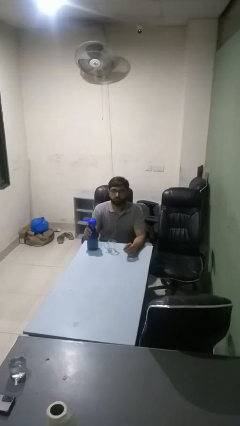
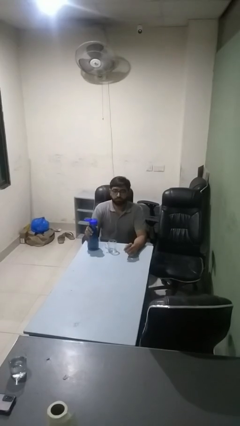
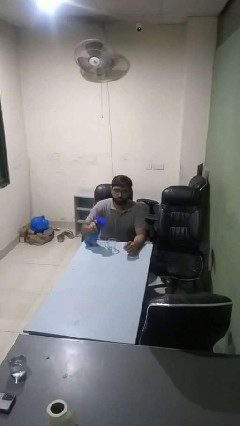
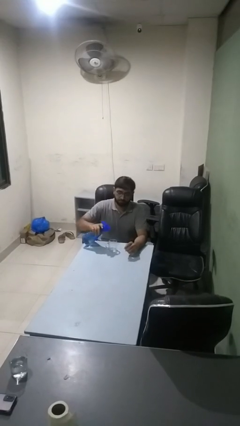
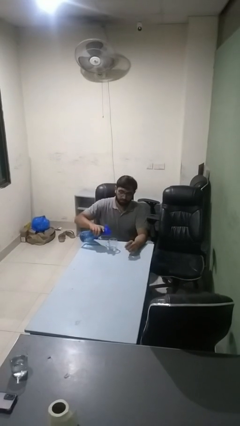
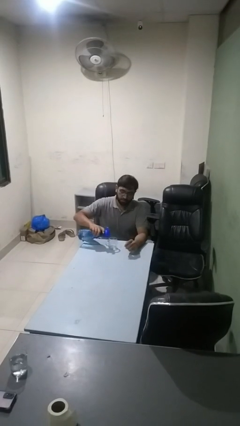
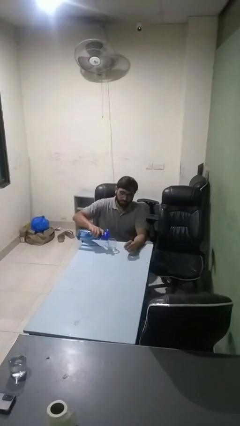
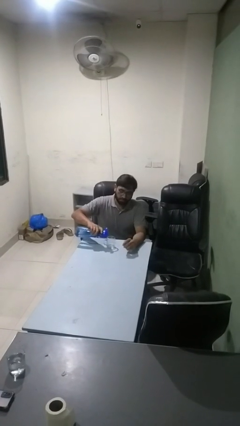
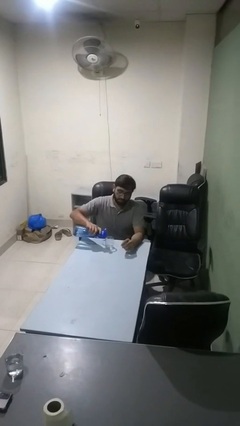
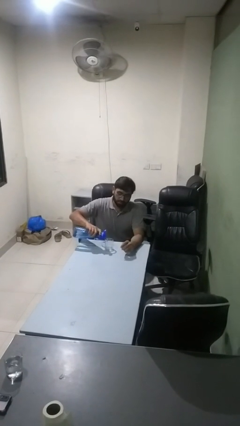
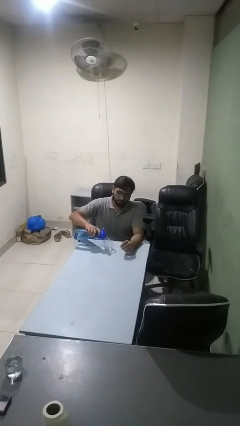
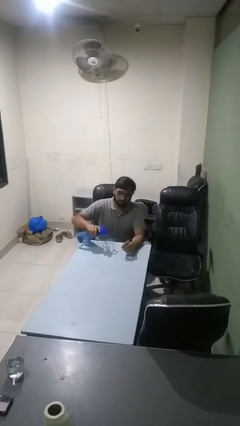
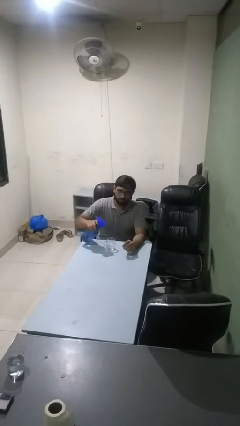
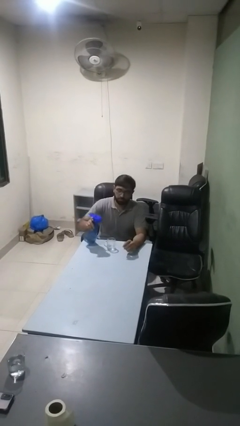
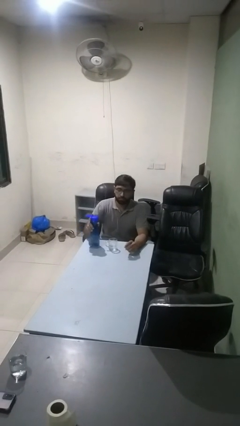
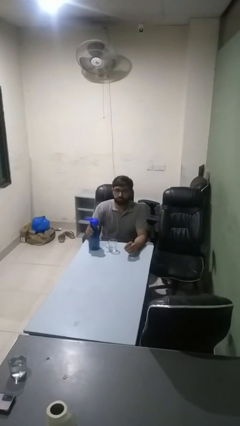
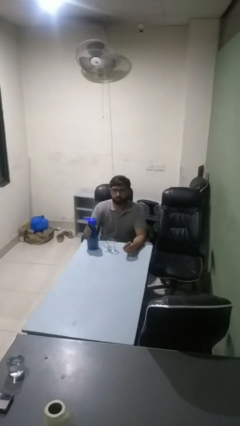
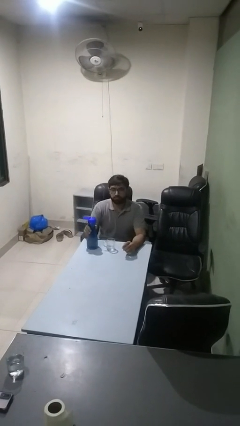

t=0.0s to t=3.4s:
person pours liquid into cup

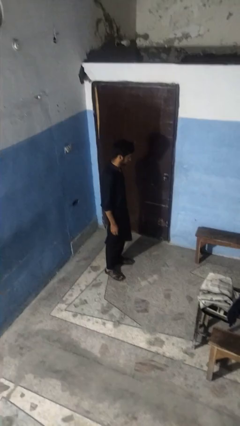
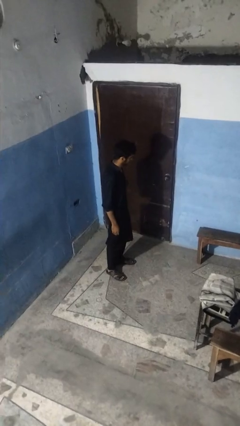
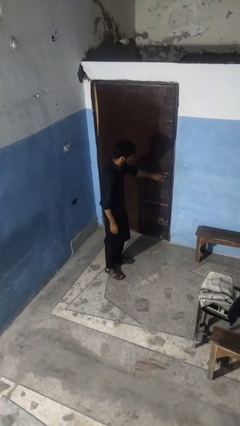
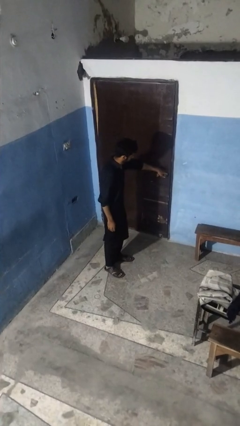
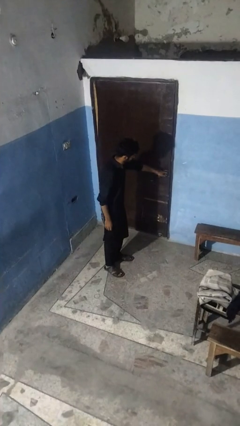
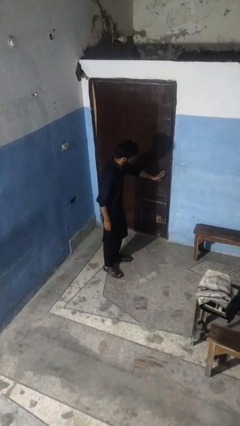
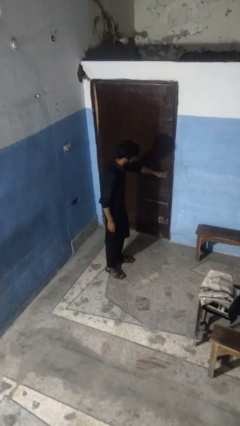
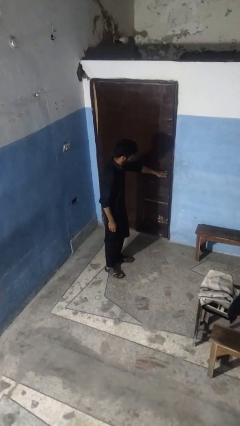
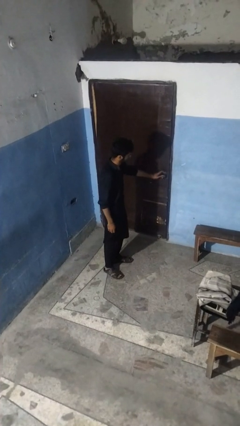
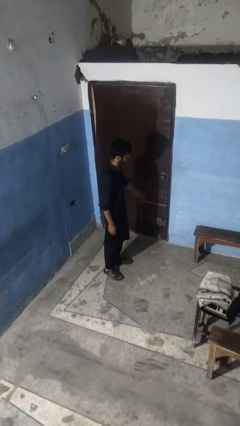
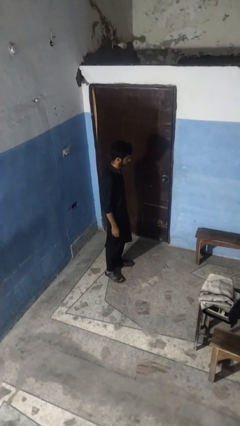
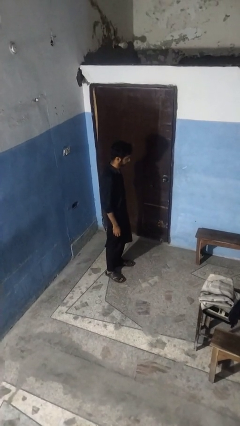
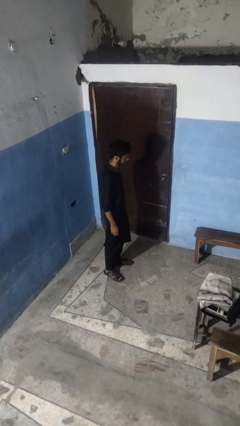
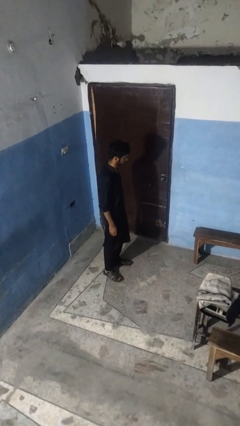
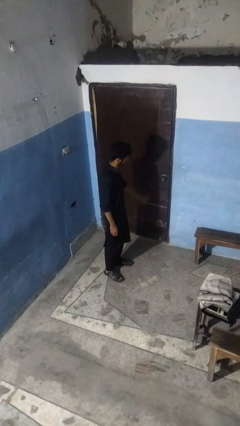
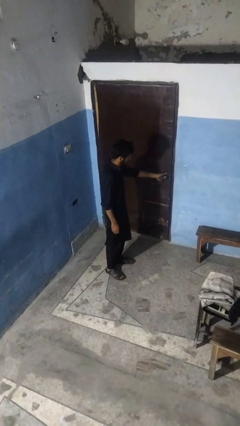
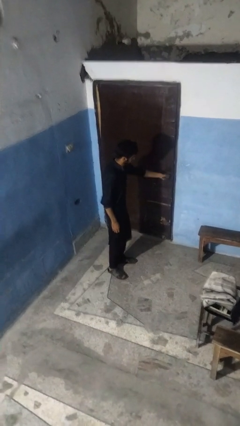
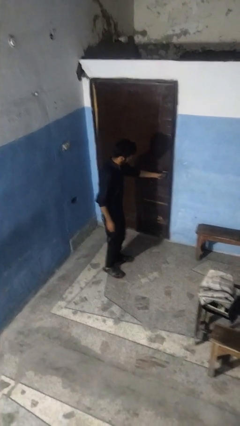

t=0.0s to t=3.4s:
person unlocks door with keys

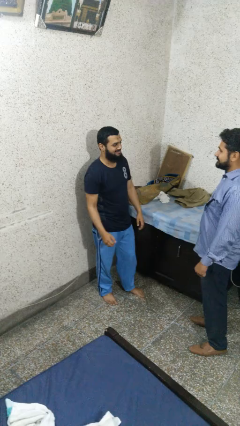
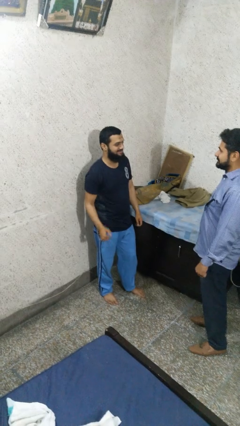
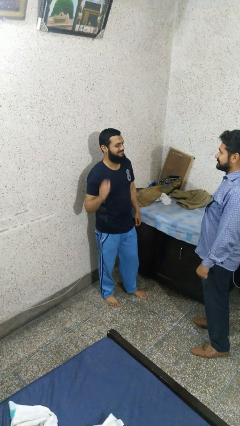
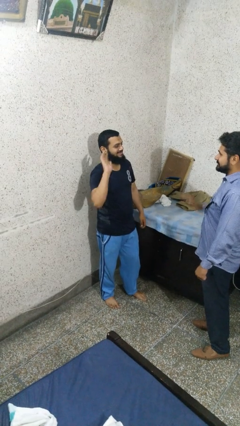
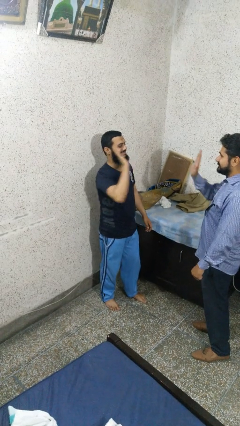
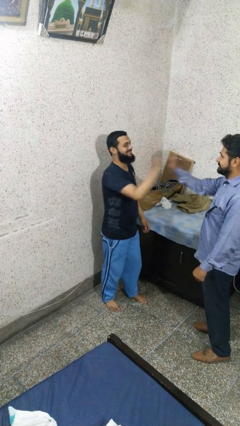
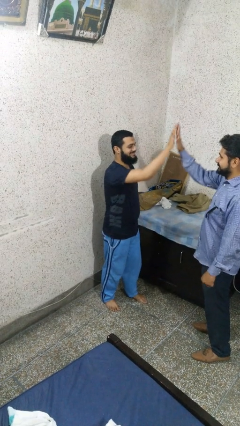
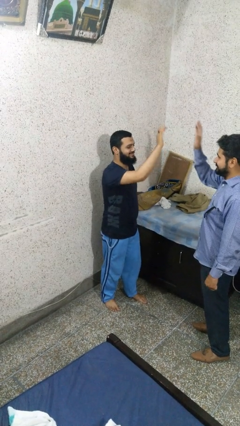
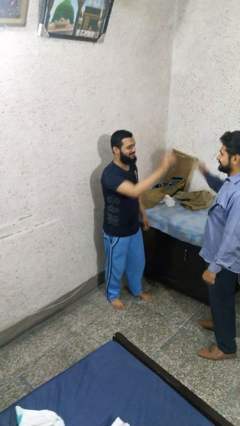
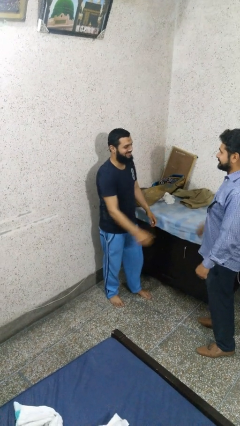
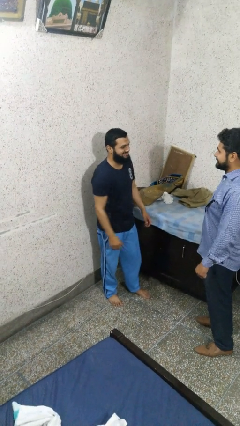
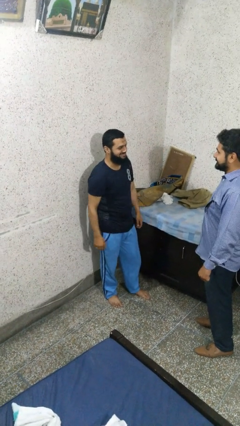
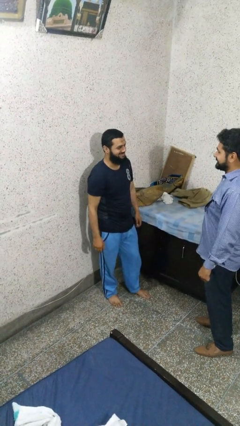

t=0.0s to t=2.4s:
person highfives hand

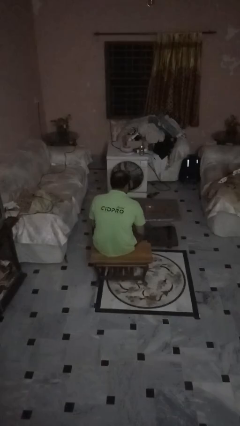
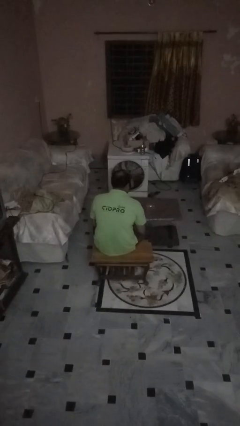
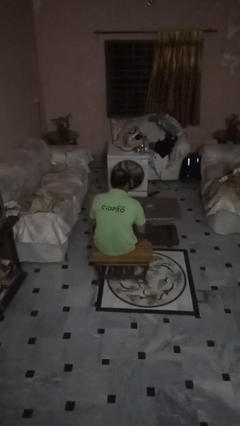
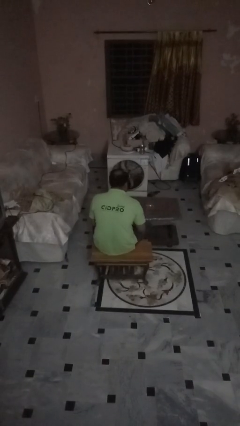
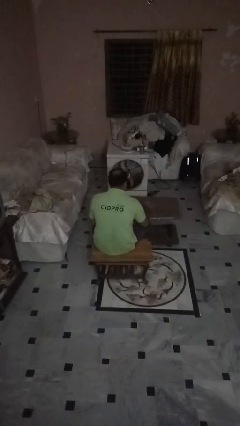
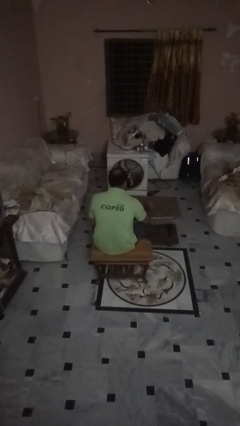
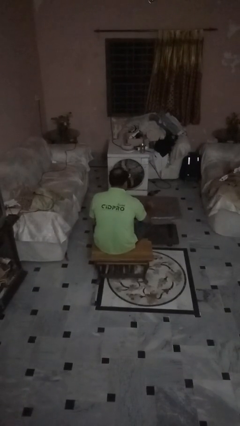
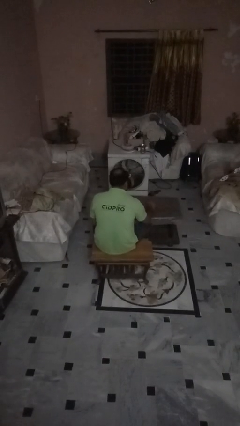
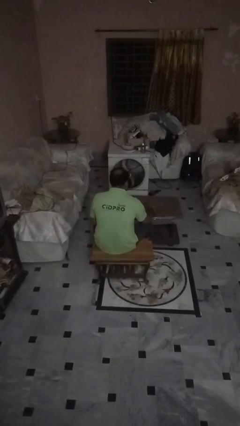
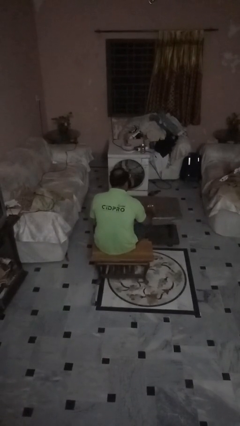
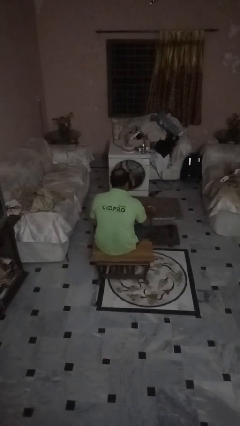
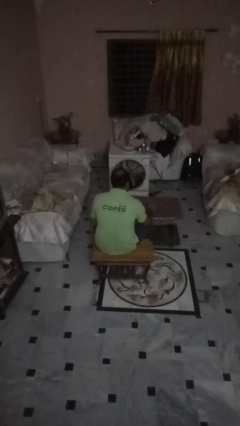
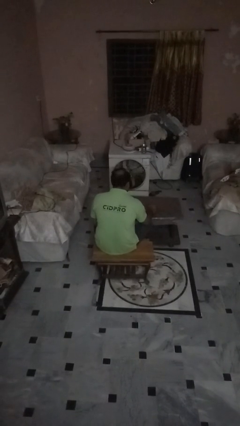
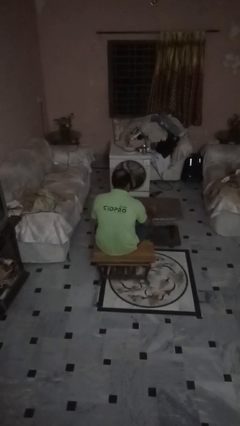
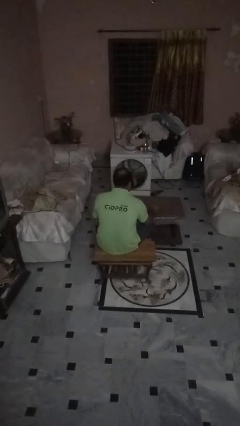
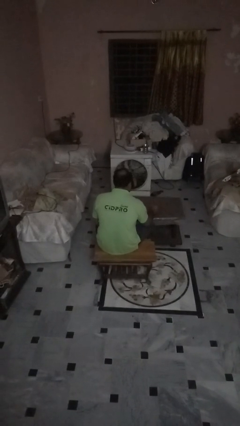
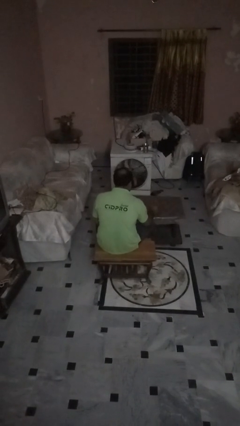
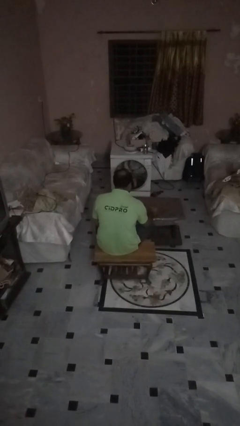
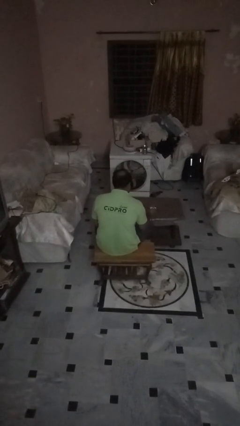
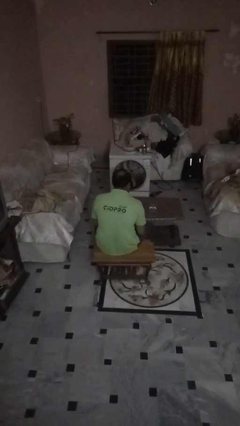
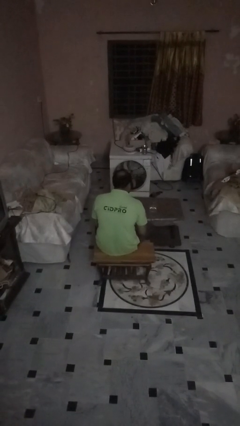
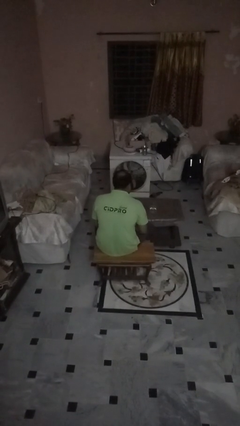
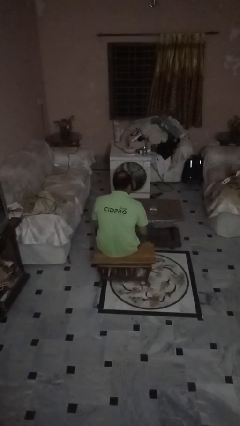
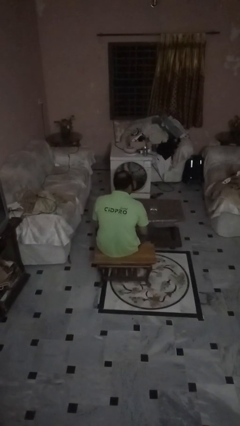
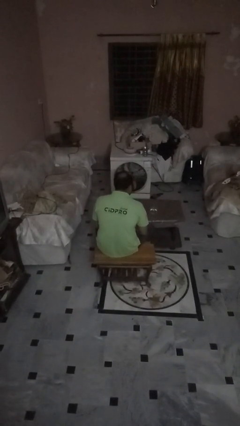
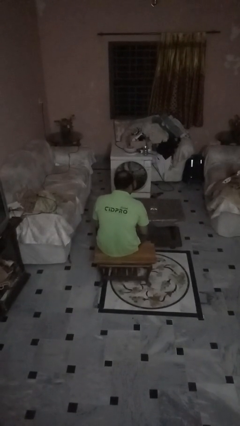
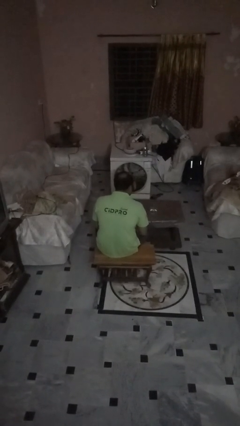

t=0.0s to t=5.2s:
person sets upright glass

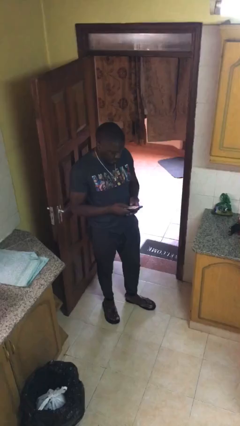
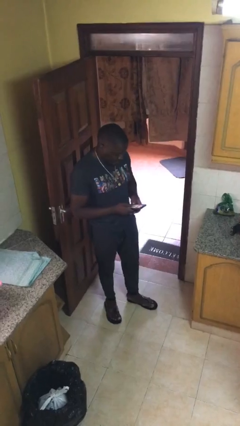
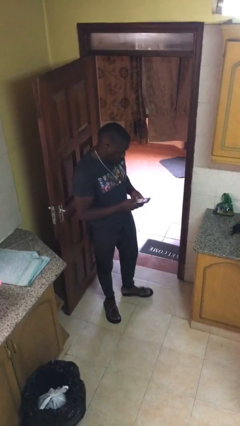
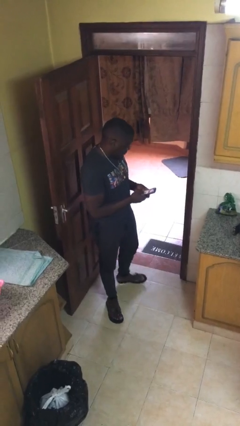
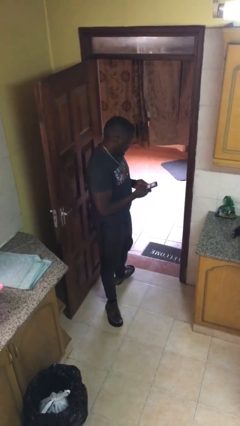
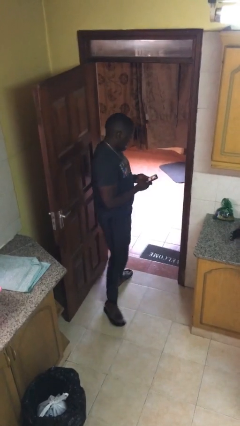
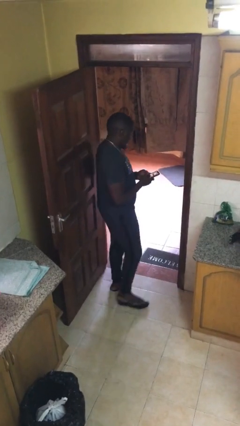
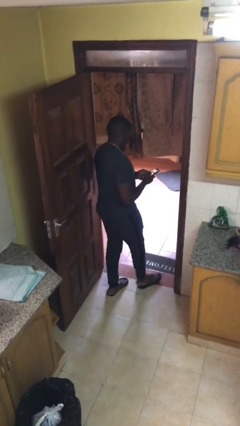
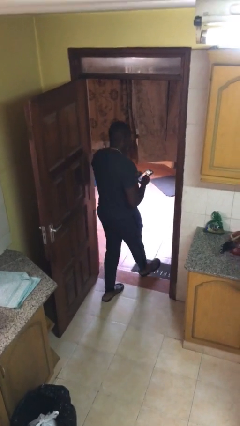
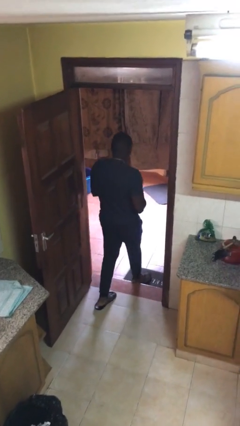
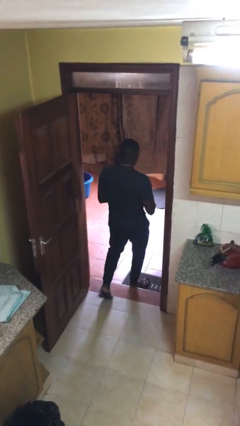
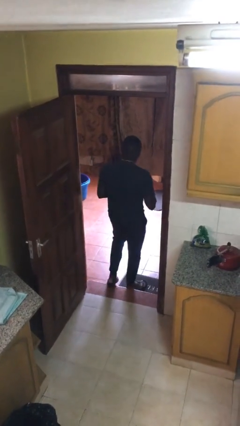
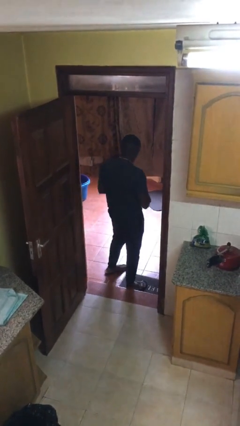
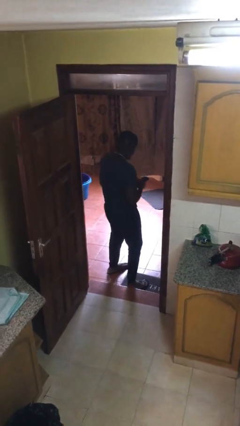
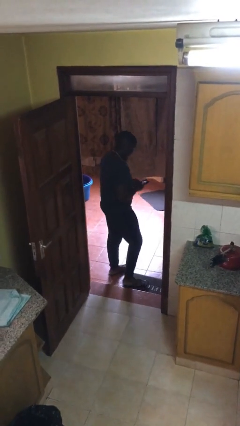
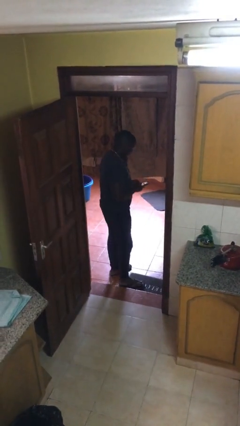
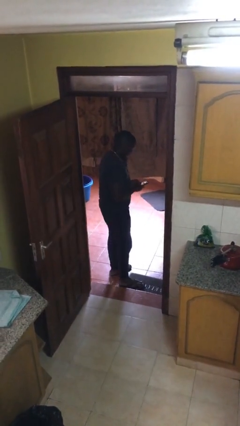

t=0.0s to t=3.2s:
person exits scene through structure
